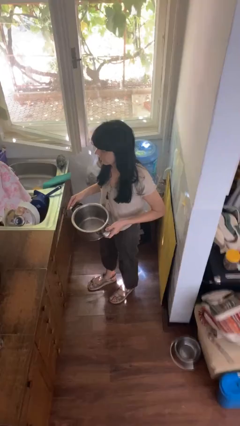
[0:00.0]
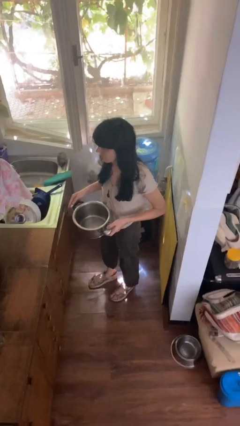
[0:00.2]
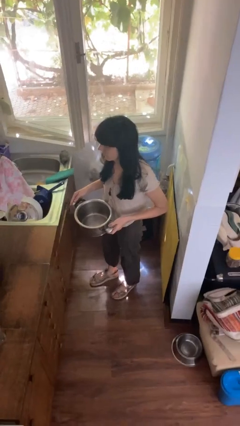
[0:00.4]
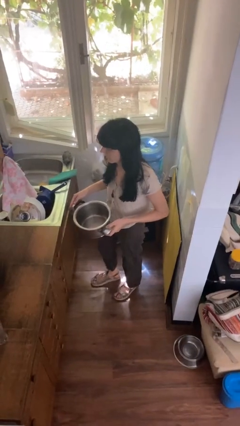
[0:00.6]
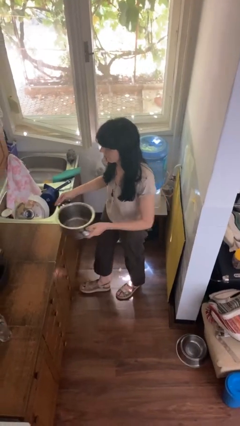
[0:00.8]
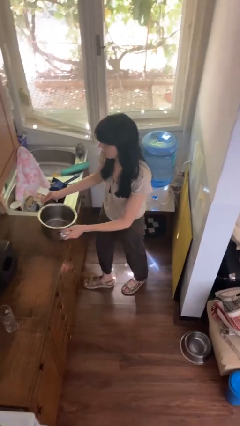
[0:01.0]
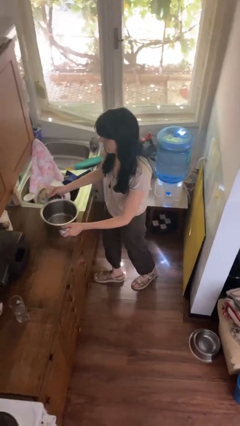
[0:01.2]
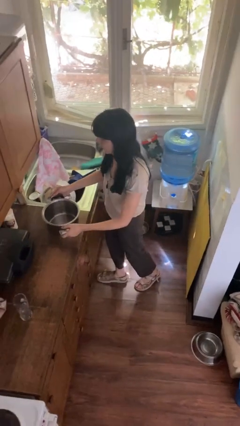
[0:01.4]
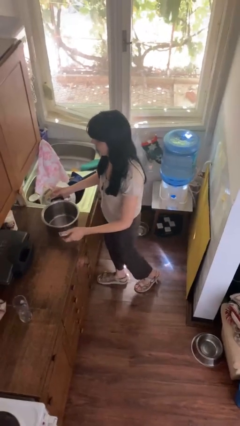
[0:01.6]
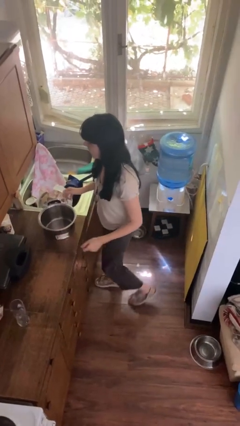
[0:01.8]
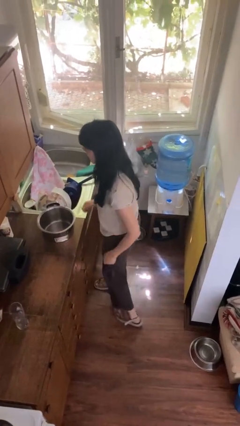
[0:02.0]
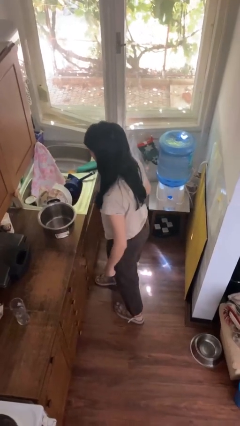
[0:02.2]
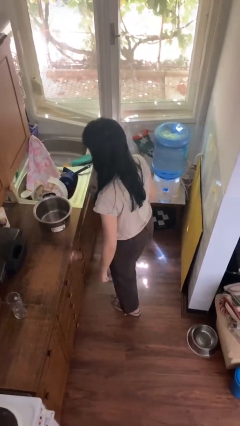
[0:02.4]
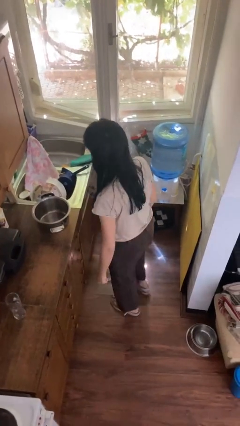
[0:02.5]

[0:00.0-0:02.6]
person puts down object on countertop

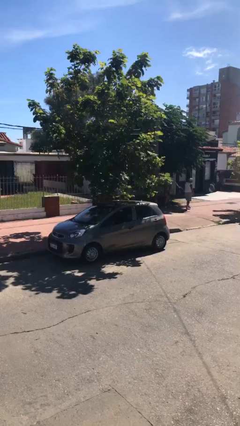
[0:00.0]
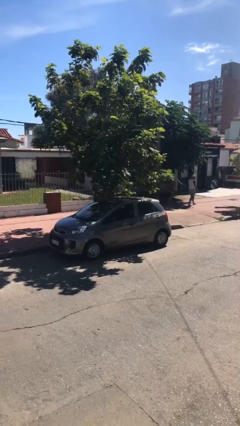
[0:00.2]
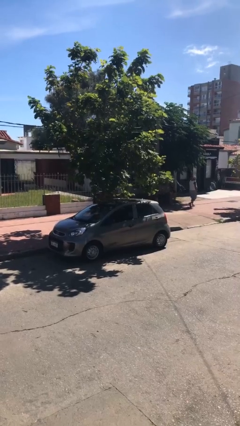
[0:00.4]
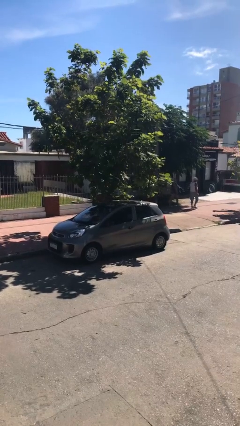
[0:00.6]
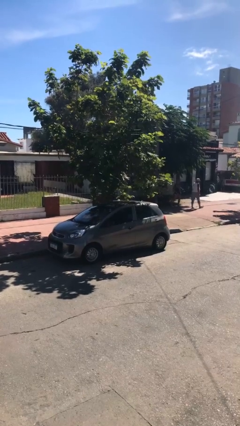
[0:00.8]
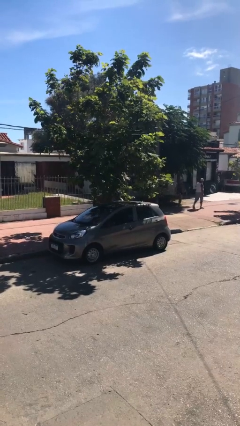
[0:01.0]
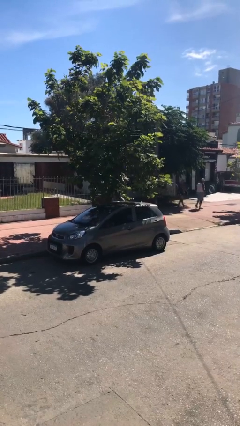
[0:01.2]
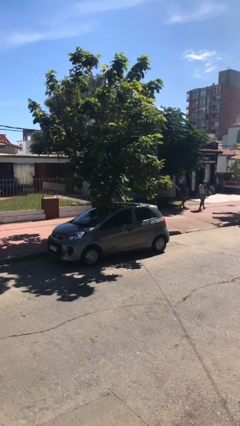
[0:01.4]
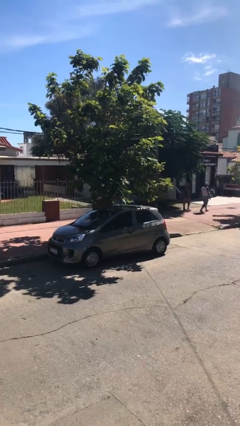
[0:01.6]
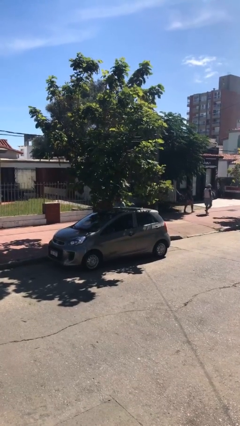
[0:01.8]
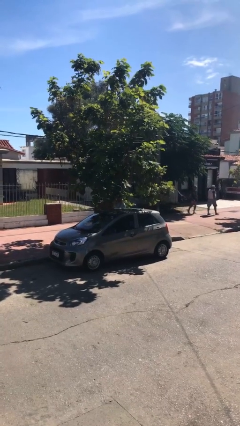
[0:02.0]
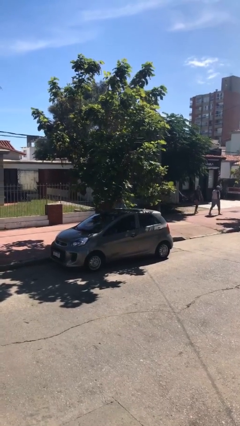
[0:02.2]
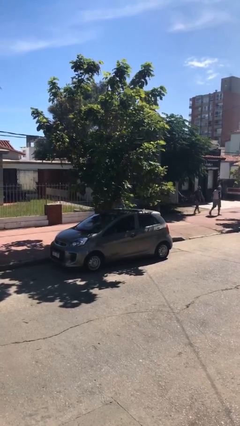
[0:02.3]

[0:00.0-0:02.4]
person exits car

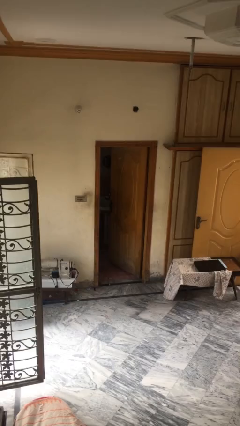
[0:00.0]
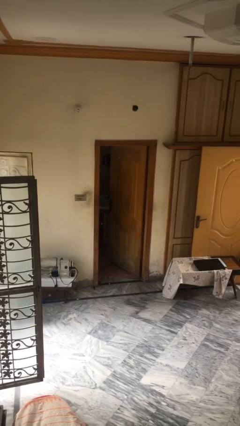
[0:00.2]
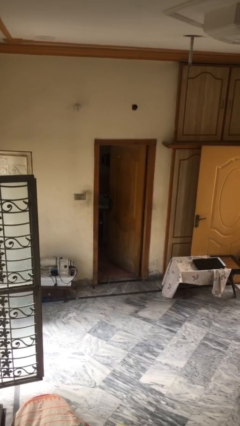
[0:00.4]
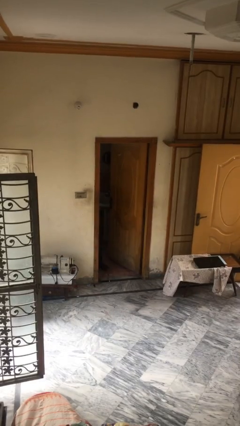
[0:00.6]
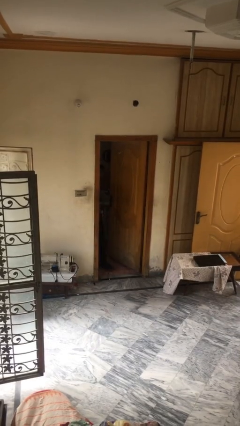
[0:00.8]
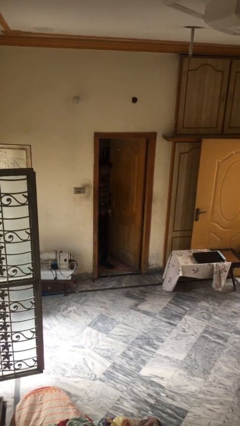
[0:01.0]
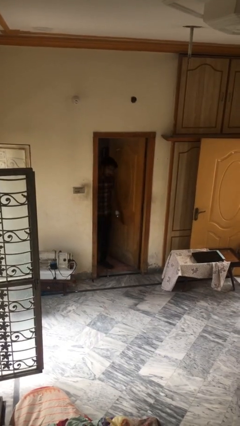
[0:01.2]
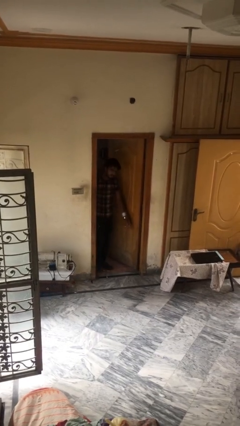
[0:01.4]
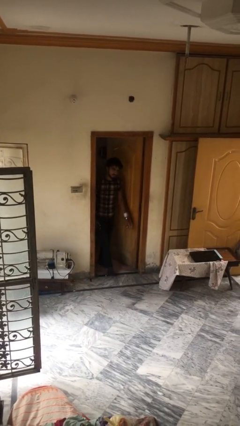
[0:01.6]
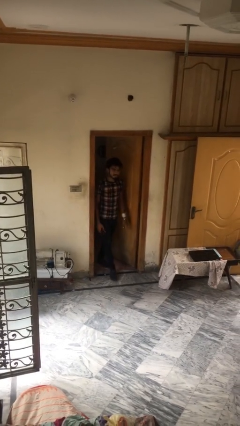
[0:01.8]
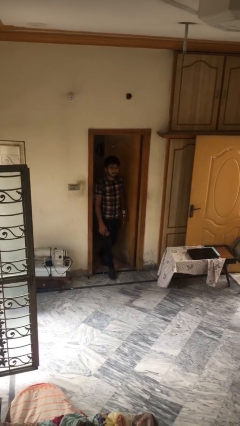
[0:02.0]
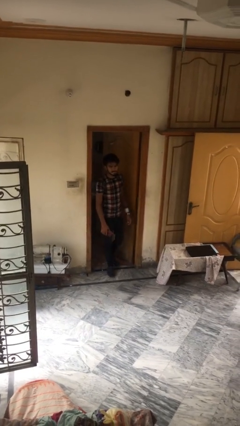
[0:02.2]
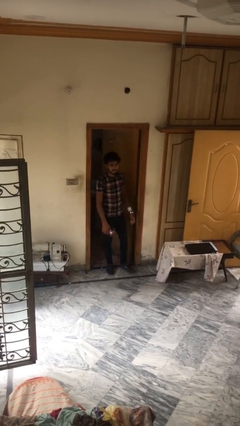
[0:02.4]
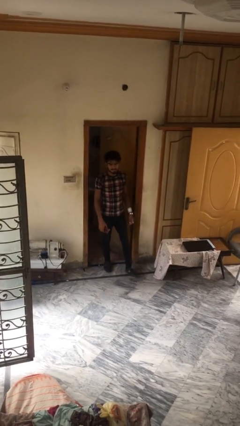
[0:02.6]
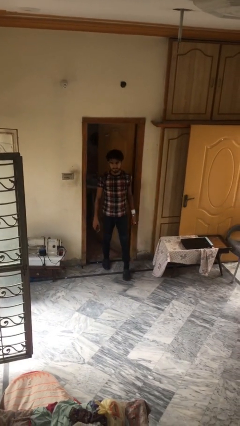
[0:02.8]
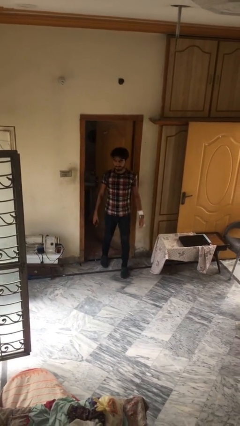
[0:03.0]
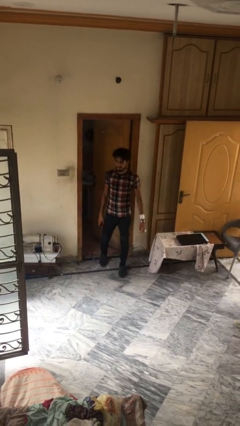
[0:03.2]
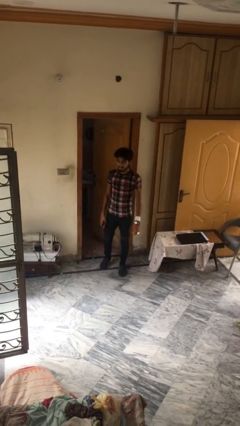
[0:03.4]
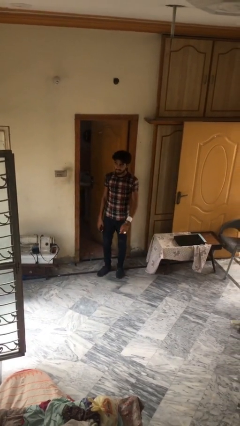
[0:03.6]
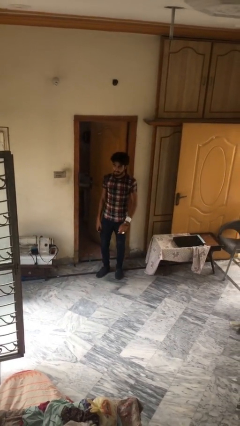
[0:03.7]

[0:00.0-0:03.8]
person enters scene through structure

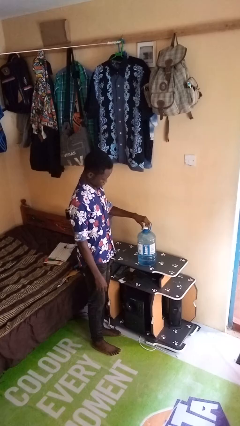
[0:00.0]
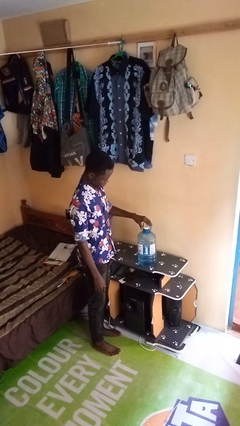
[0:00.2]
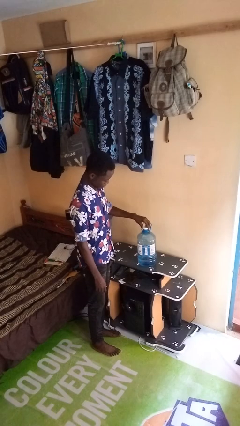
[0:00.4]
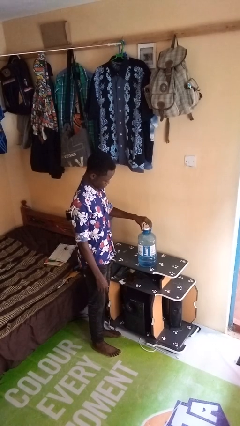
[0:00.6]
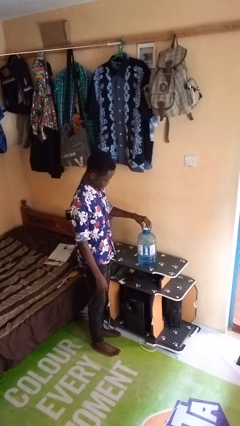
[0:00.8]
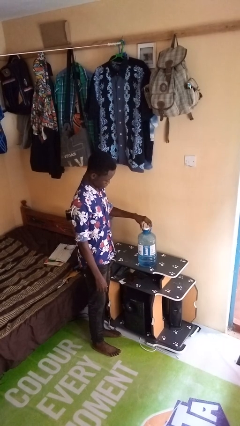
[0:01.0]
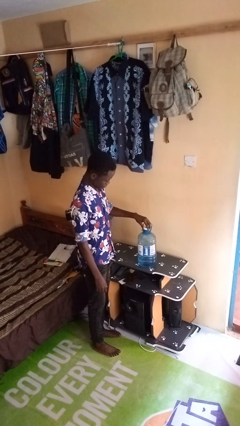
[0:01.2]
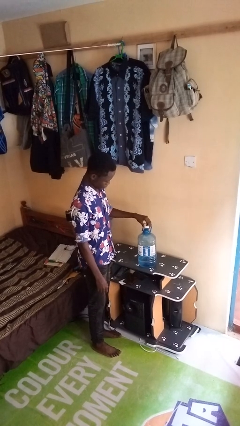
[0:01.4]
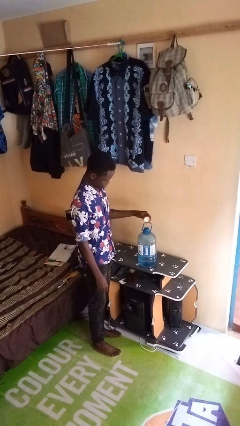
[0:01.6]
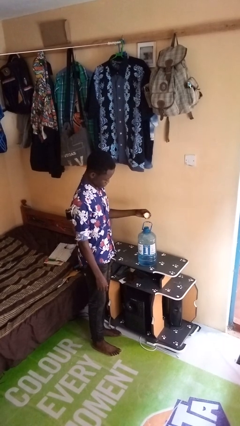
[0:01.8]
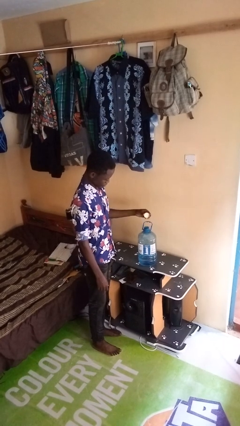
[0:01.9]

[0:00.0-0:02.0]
person unscrews lid from bottle

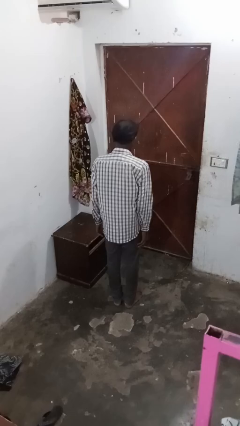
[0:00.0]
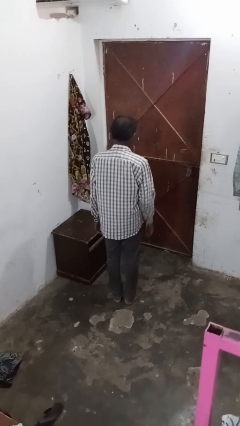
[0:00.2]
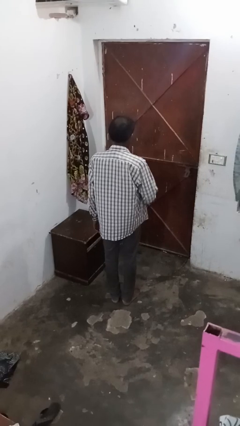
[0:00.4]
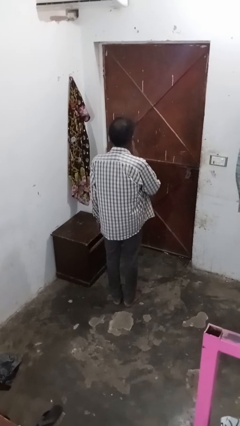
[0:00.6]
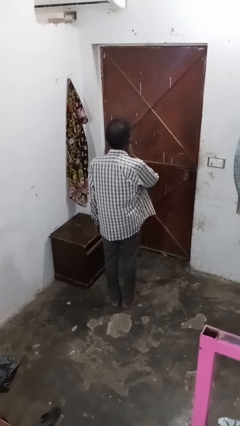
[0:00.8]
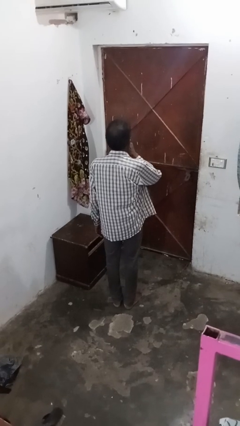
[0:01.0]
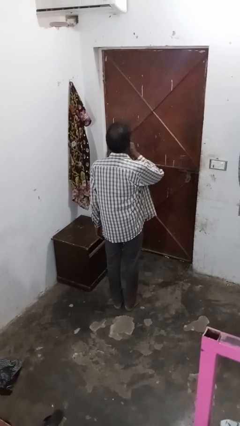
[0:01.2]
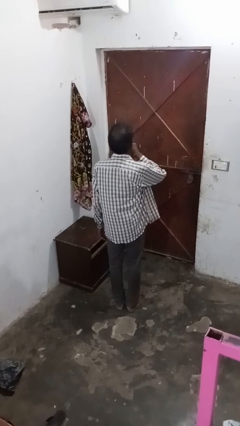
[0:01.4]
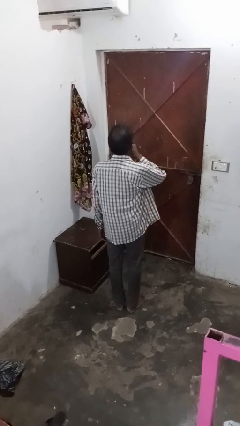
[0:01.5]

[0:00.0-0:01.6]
person gestures be quiet

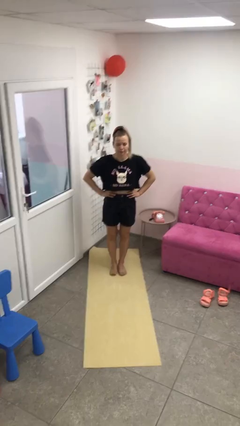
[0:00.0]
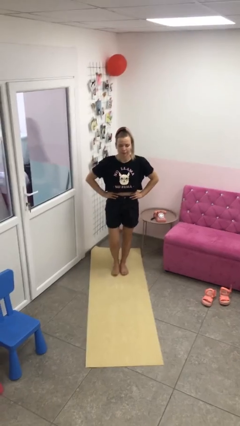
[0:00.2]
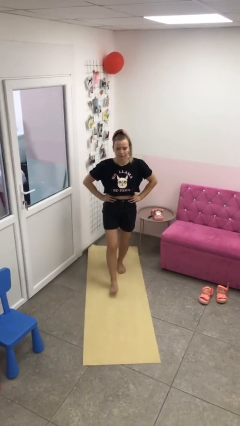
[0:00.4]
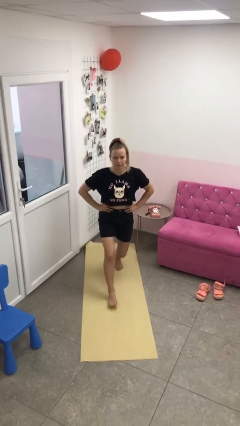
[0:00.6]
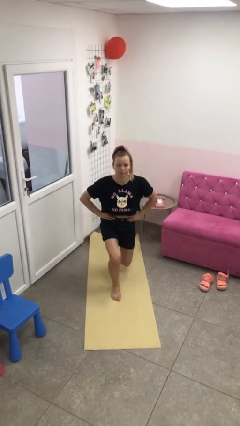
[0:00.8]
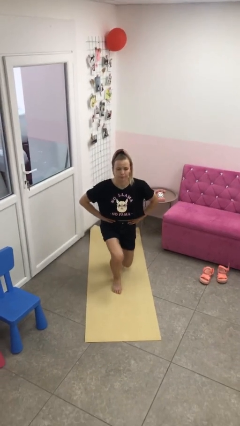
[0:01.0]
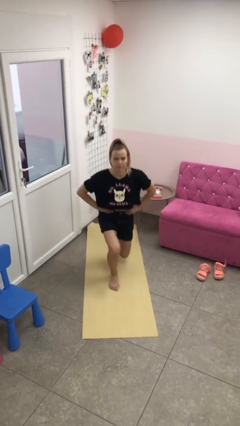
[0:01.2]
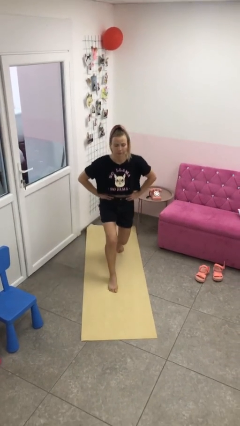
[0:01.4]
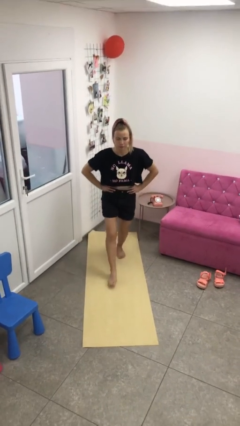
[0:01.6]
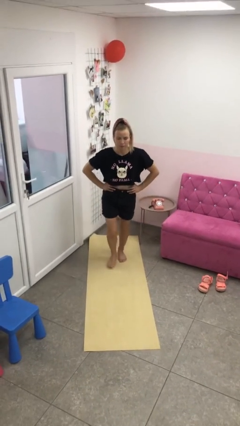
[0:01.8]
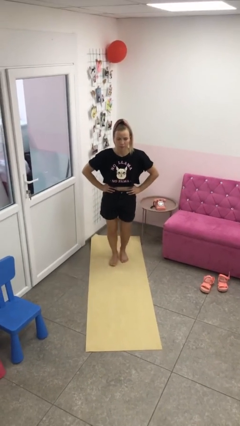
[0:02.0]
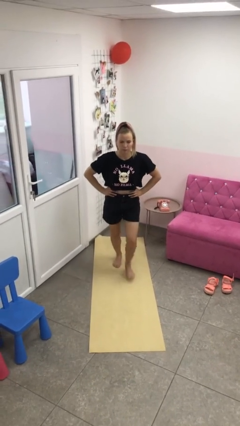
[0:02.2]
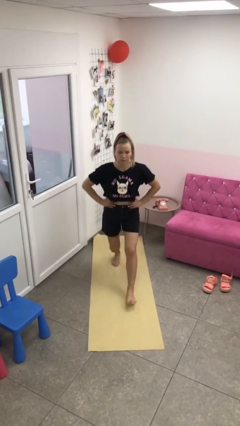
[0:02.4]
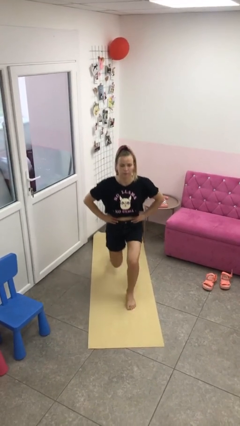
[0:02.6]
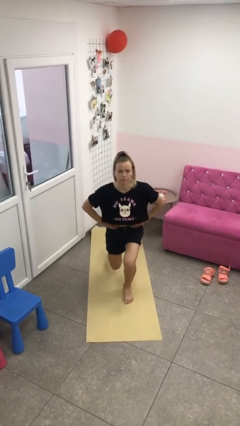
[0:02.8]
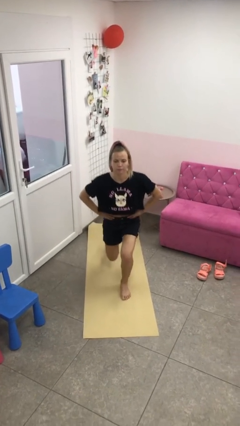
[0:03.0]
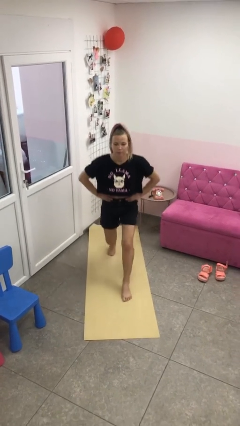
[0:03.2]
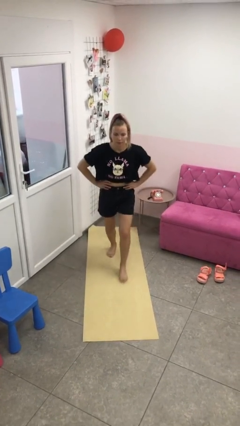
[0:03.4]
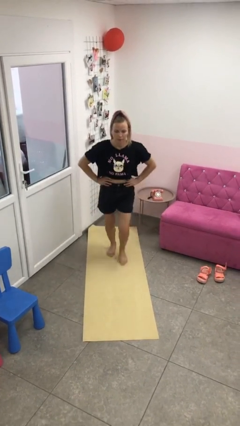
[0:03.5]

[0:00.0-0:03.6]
person exercises with lunges

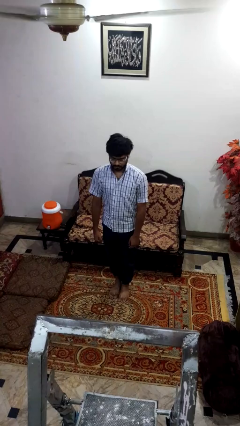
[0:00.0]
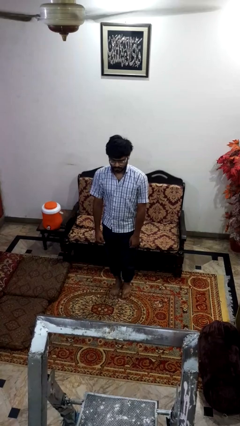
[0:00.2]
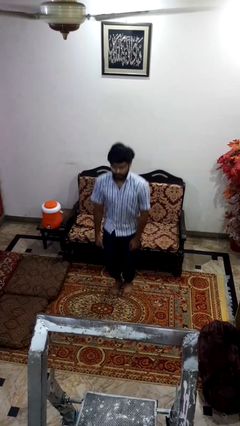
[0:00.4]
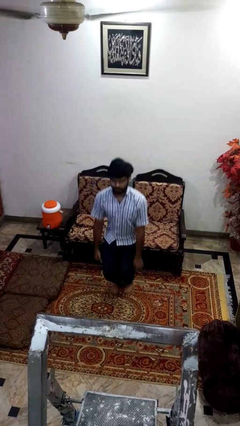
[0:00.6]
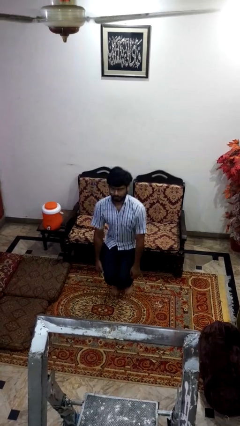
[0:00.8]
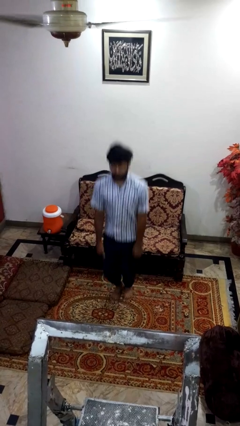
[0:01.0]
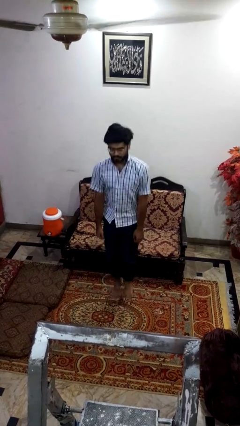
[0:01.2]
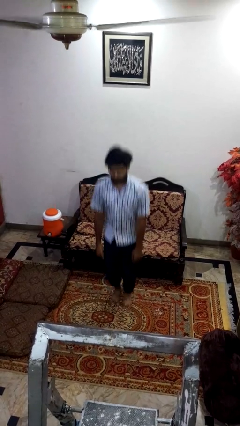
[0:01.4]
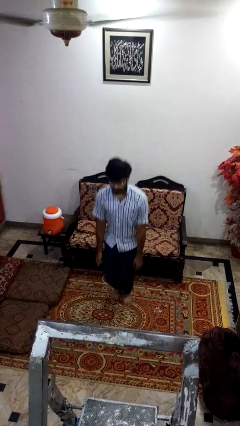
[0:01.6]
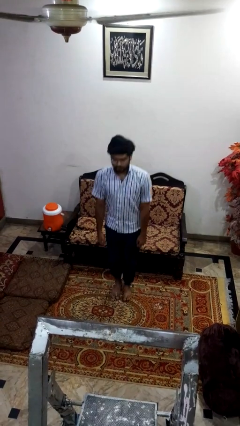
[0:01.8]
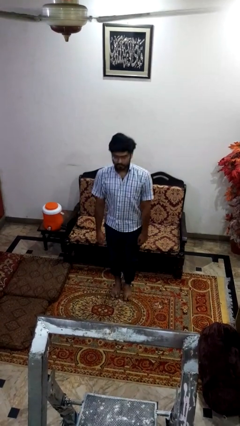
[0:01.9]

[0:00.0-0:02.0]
person jumps
